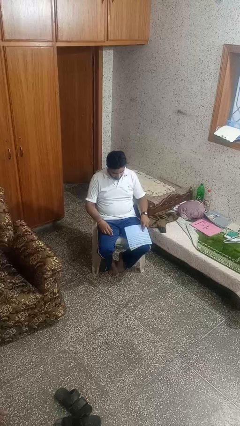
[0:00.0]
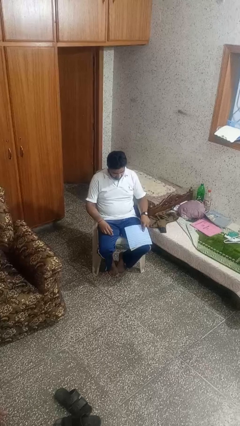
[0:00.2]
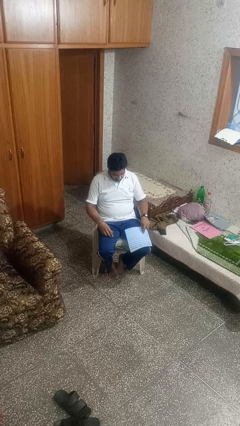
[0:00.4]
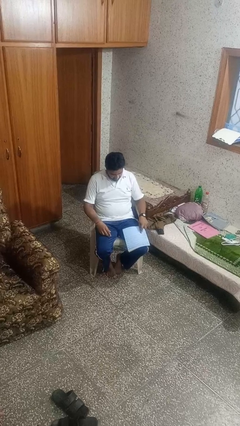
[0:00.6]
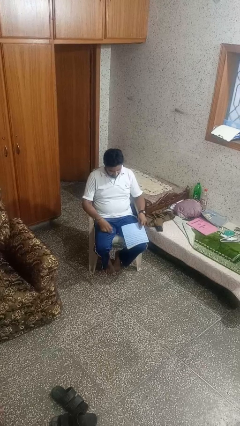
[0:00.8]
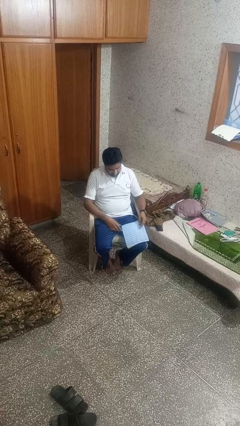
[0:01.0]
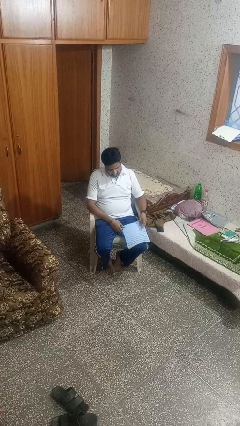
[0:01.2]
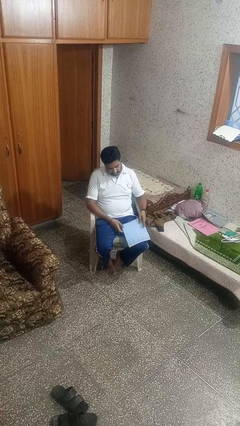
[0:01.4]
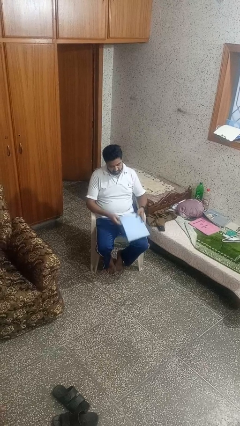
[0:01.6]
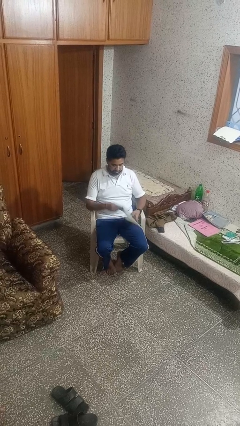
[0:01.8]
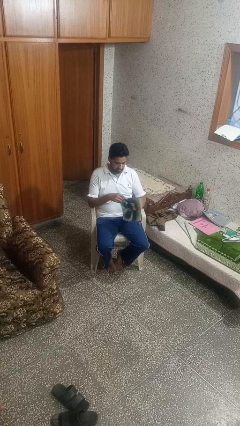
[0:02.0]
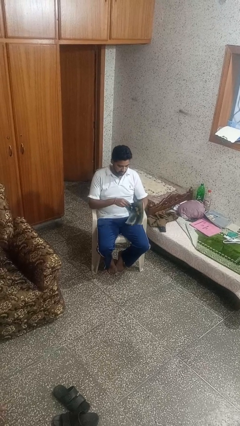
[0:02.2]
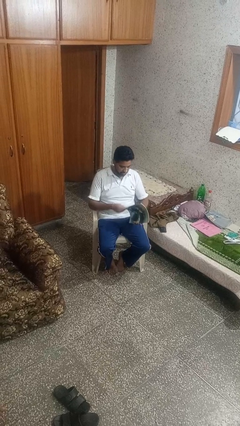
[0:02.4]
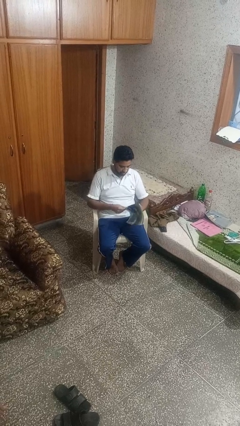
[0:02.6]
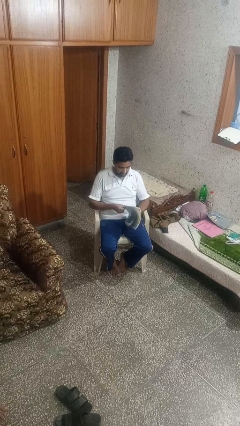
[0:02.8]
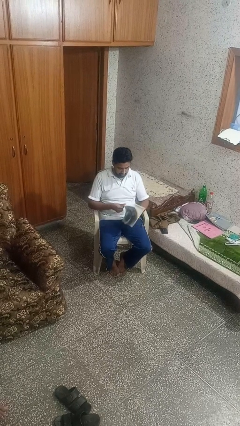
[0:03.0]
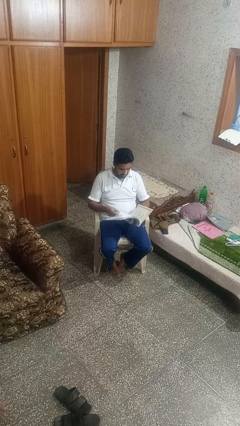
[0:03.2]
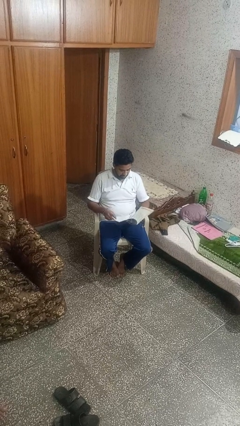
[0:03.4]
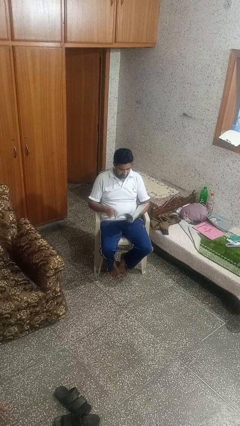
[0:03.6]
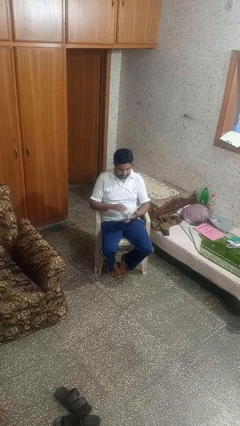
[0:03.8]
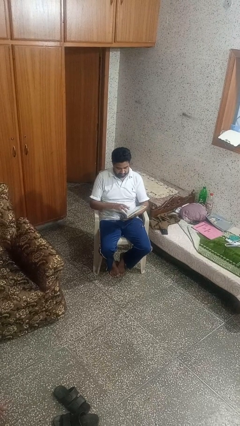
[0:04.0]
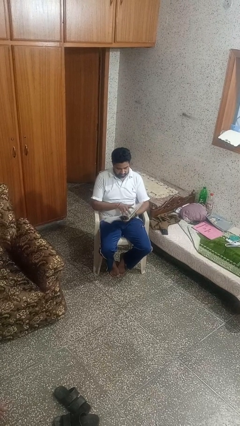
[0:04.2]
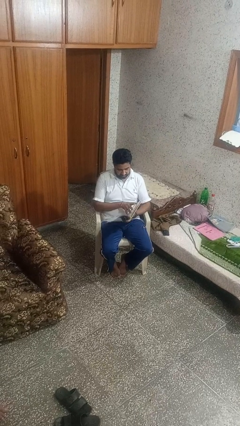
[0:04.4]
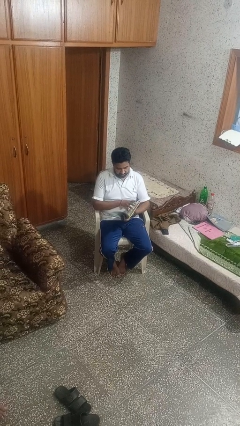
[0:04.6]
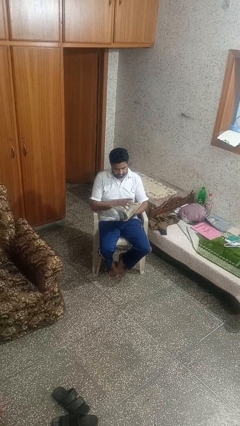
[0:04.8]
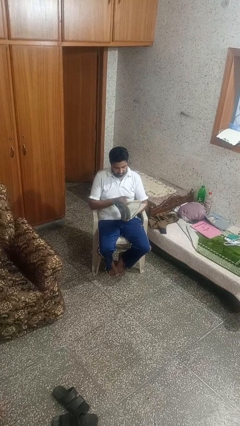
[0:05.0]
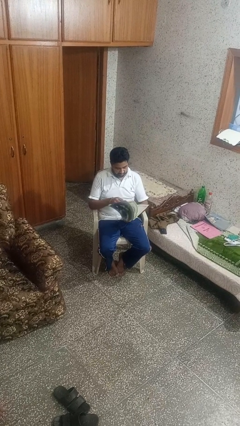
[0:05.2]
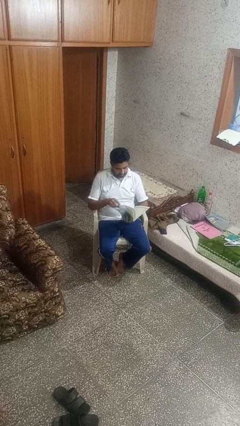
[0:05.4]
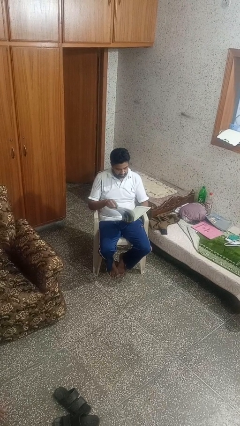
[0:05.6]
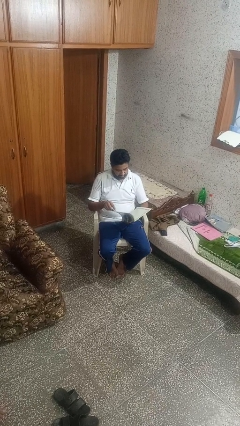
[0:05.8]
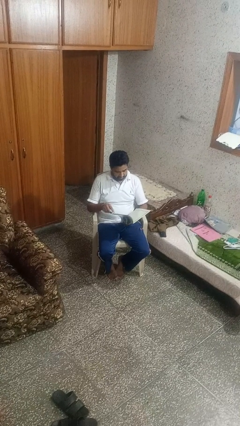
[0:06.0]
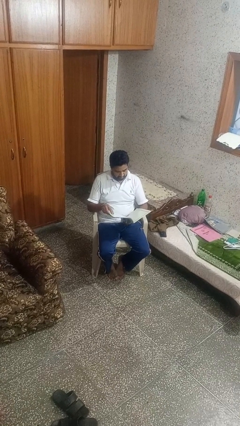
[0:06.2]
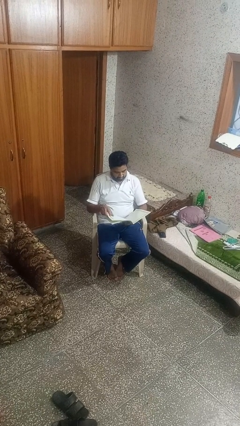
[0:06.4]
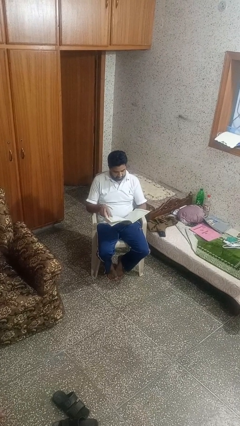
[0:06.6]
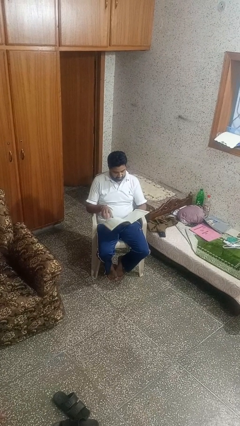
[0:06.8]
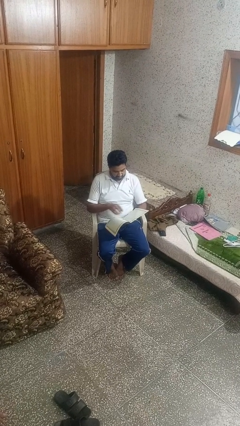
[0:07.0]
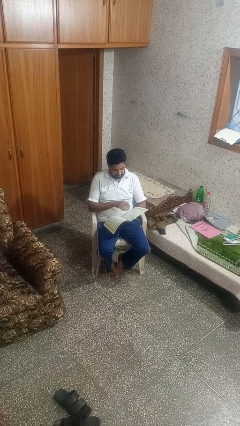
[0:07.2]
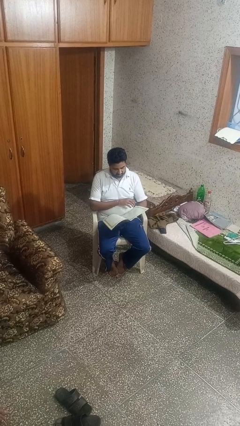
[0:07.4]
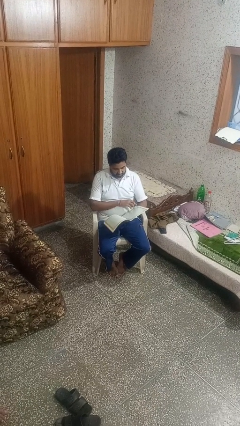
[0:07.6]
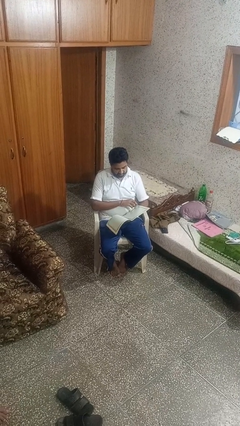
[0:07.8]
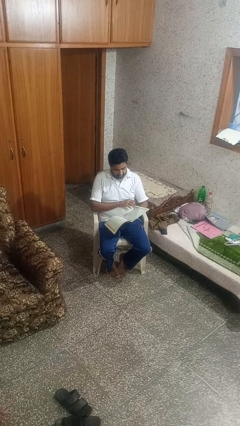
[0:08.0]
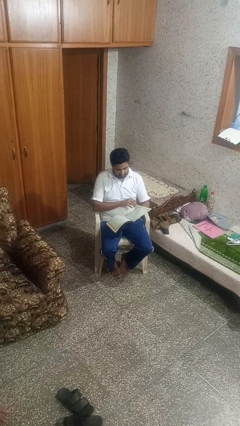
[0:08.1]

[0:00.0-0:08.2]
person reads magazine

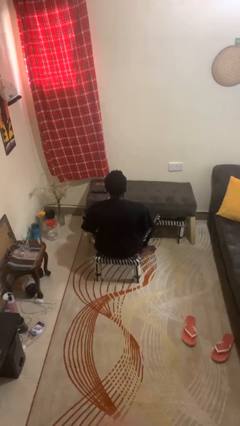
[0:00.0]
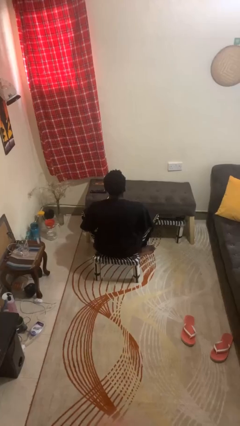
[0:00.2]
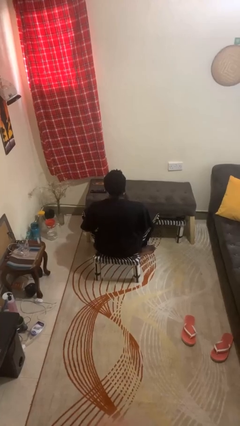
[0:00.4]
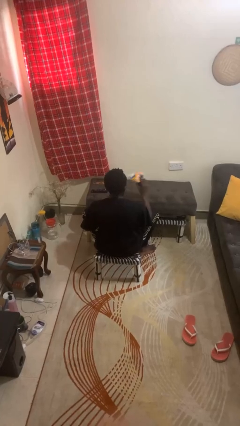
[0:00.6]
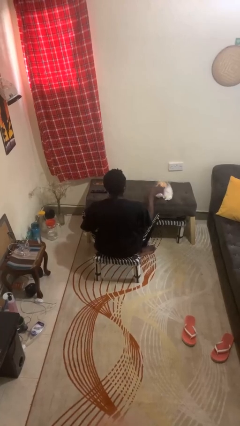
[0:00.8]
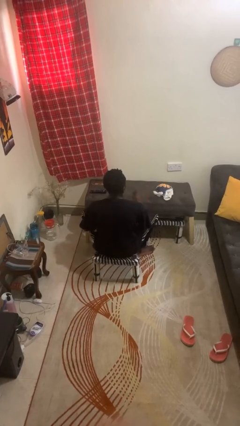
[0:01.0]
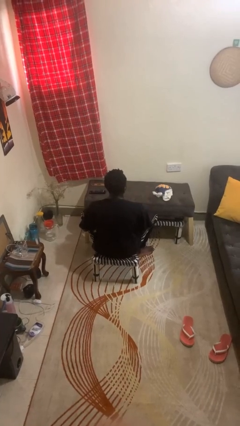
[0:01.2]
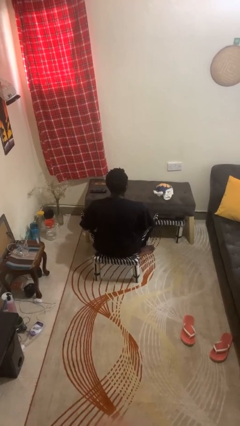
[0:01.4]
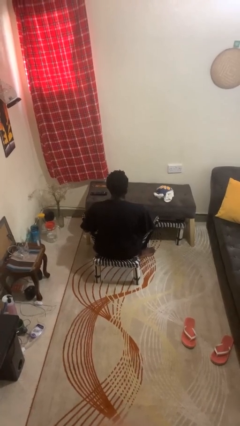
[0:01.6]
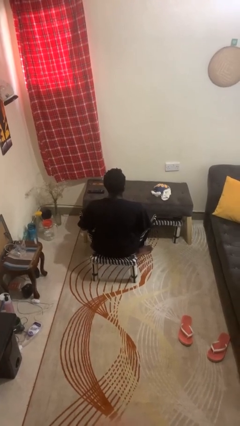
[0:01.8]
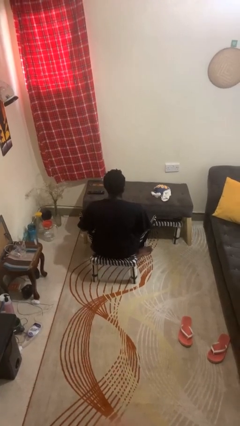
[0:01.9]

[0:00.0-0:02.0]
person throws object on table

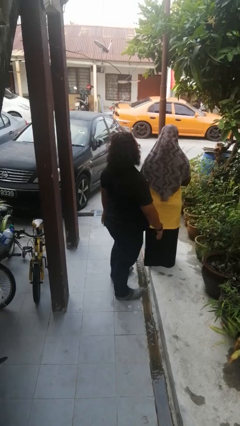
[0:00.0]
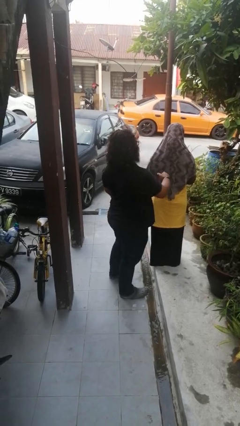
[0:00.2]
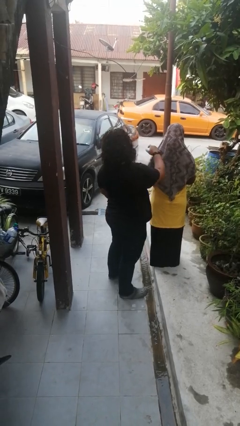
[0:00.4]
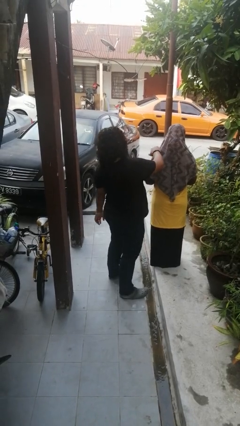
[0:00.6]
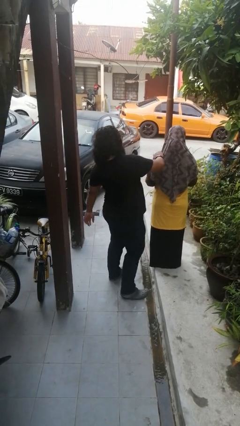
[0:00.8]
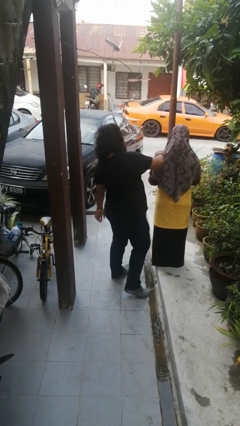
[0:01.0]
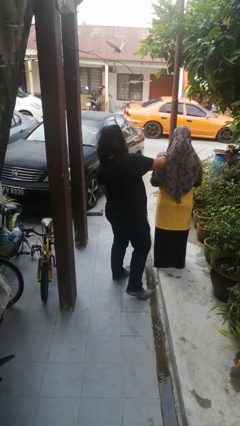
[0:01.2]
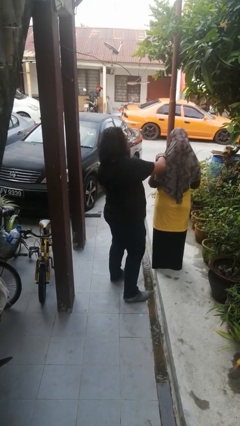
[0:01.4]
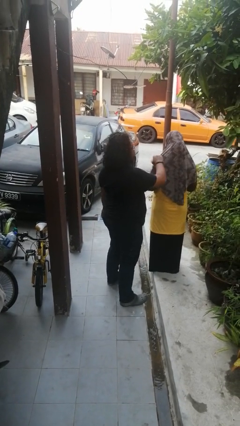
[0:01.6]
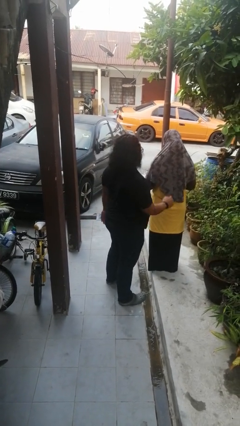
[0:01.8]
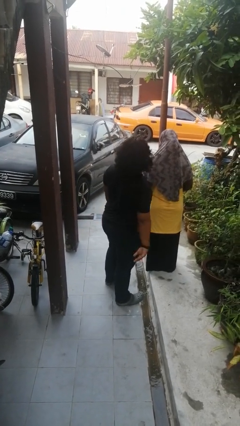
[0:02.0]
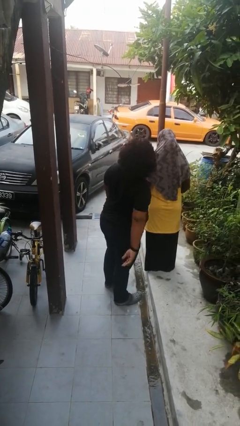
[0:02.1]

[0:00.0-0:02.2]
person touches back of person

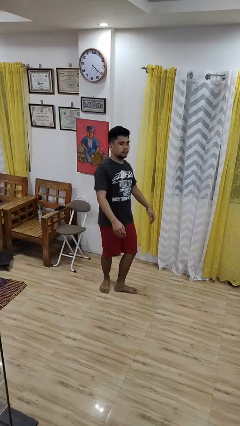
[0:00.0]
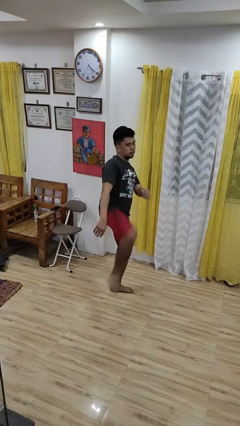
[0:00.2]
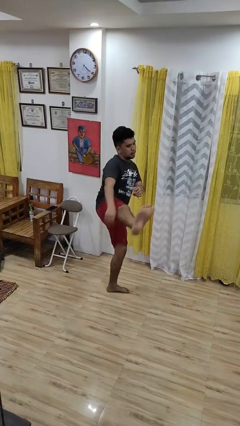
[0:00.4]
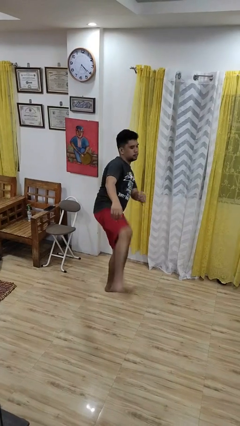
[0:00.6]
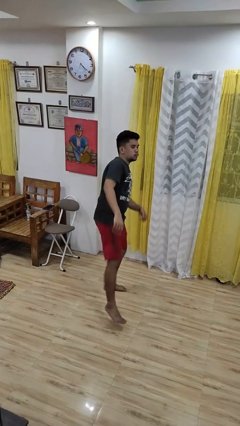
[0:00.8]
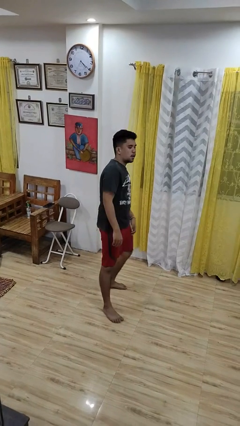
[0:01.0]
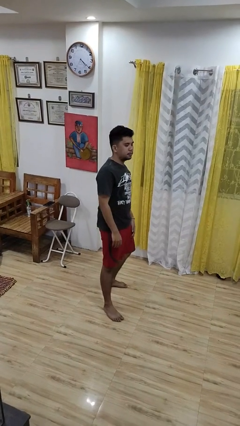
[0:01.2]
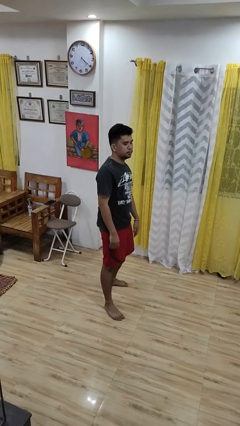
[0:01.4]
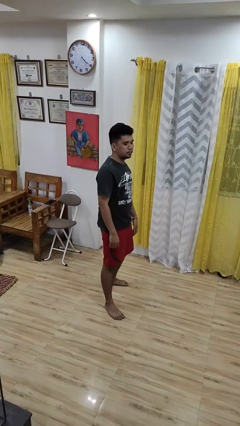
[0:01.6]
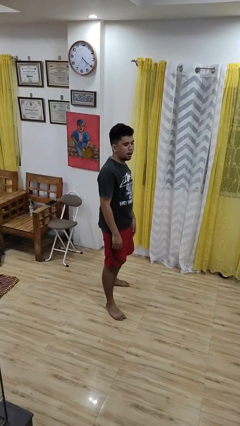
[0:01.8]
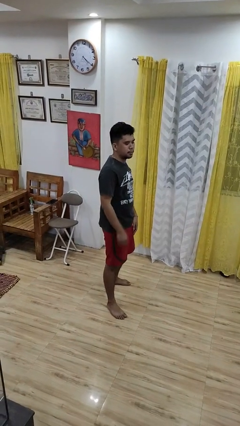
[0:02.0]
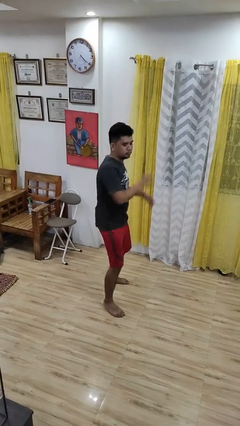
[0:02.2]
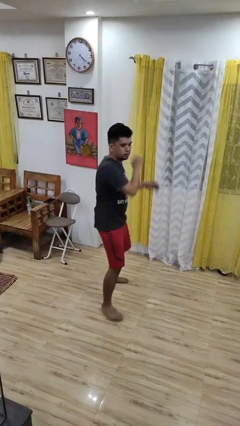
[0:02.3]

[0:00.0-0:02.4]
person karate kicks

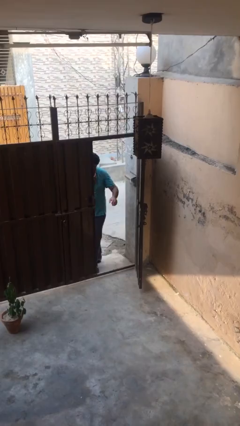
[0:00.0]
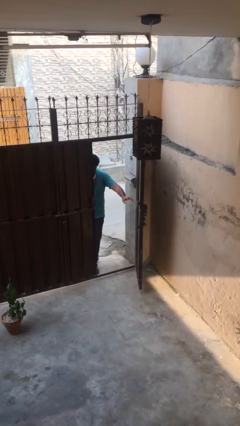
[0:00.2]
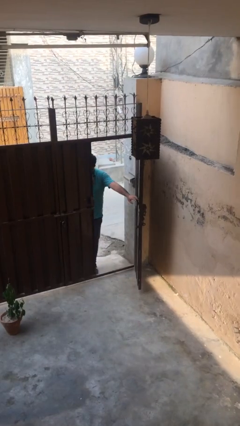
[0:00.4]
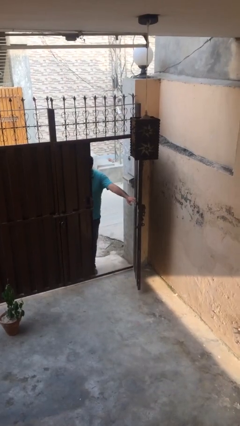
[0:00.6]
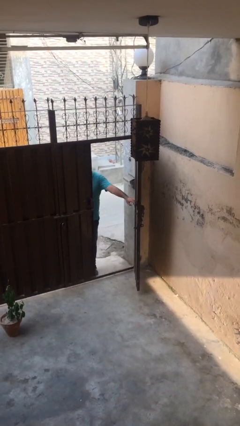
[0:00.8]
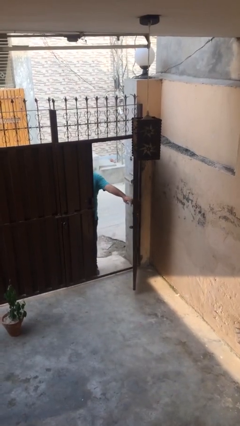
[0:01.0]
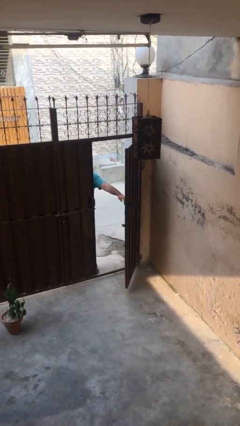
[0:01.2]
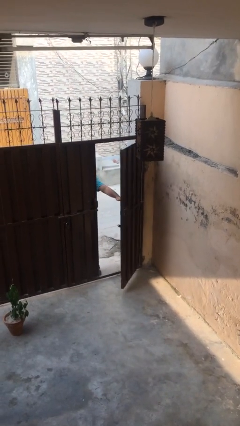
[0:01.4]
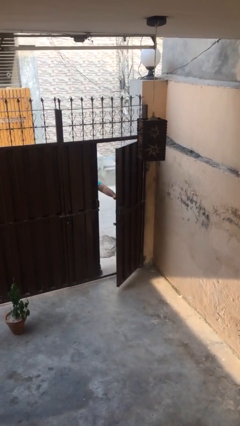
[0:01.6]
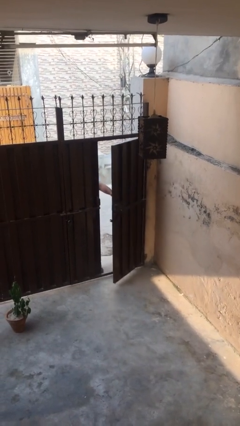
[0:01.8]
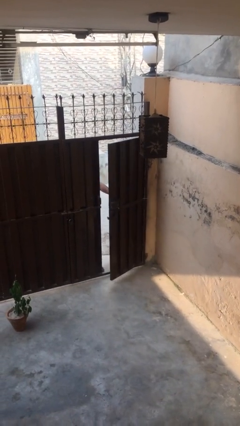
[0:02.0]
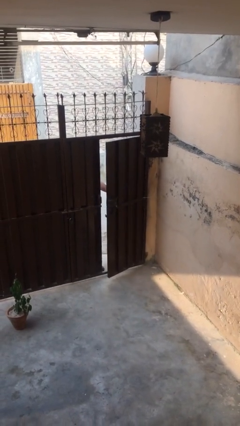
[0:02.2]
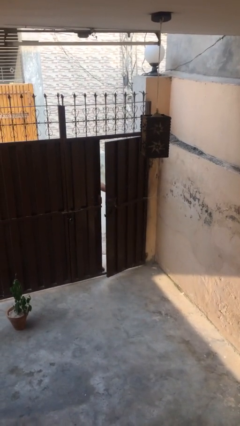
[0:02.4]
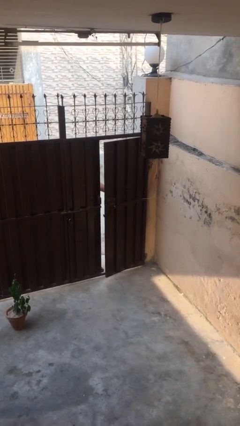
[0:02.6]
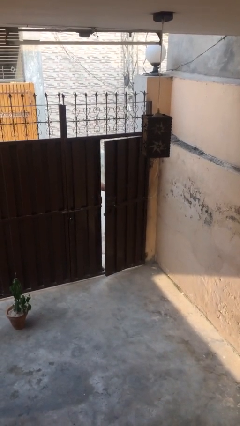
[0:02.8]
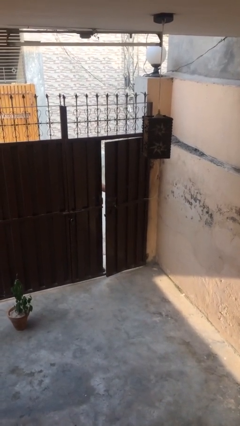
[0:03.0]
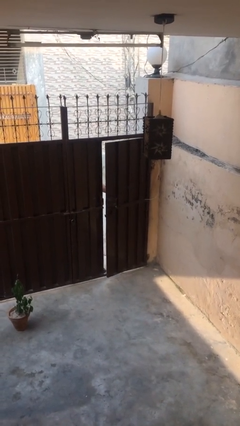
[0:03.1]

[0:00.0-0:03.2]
person closes facility door
